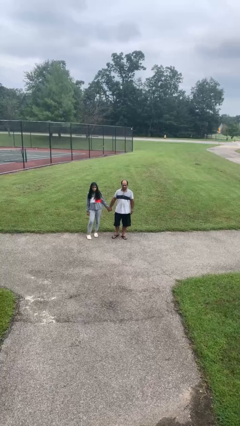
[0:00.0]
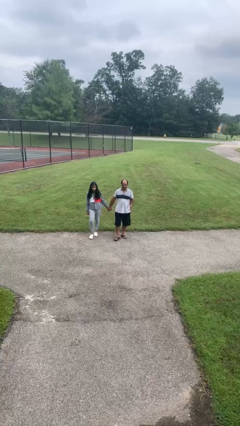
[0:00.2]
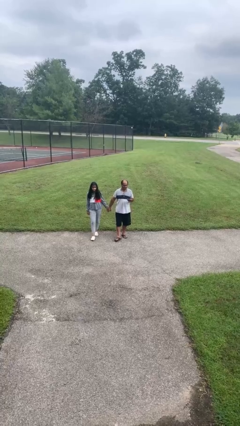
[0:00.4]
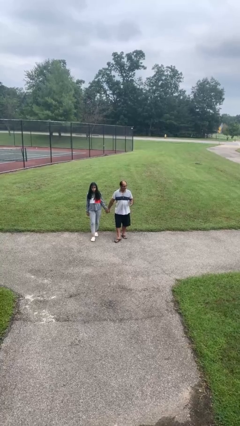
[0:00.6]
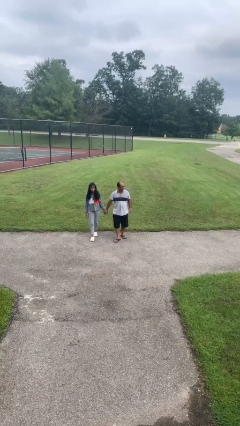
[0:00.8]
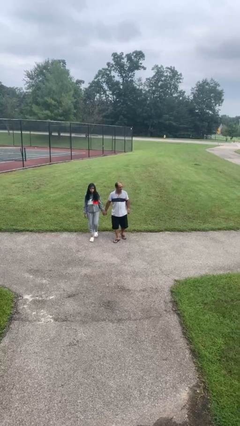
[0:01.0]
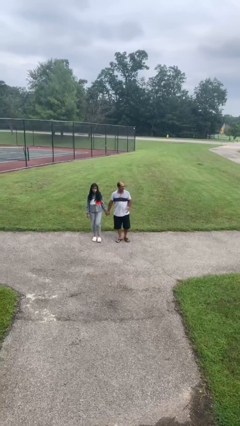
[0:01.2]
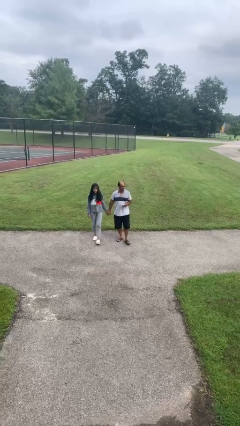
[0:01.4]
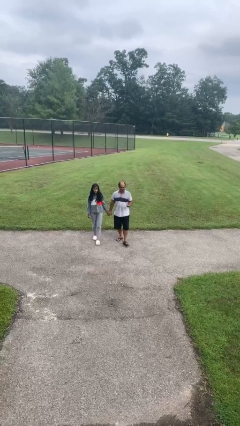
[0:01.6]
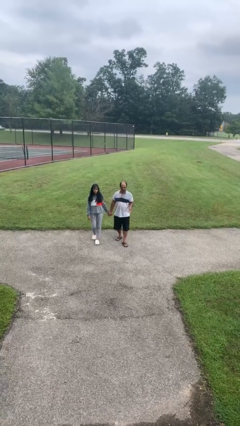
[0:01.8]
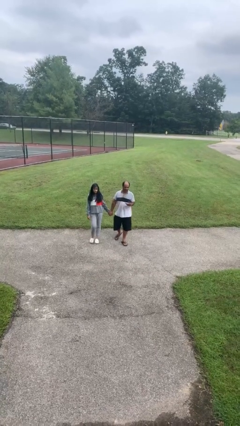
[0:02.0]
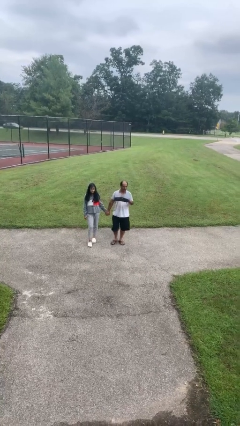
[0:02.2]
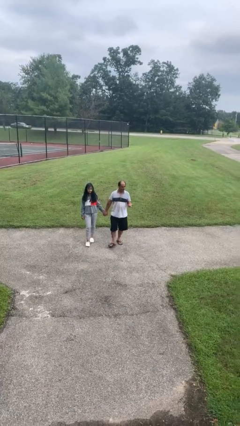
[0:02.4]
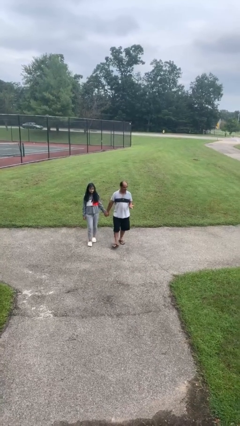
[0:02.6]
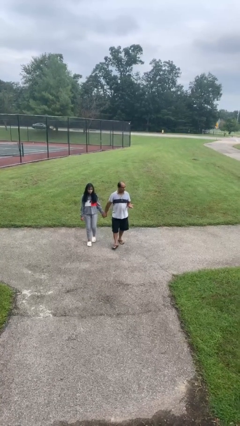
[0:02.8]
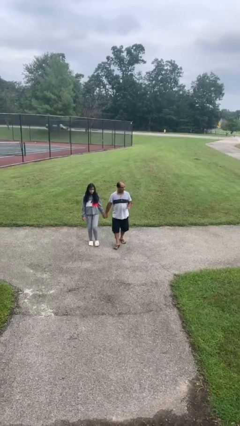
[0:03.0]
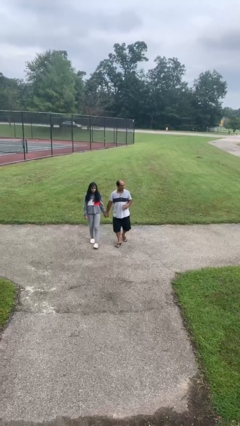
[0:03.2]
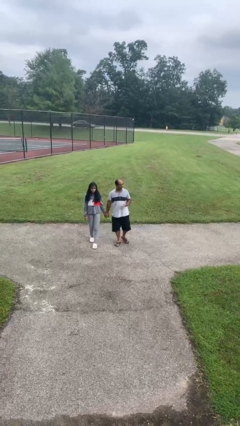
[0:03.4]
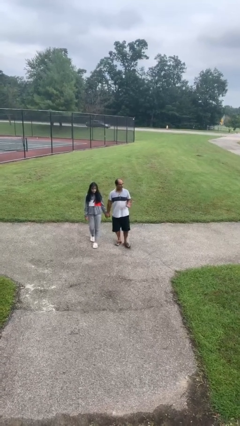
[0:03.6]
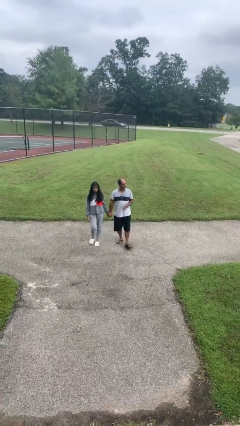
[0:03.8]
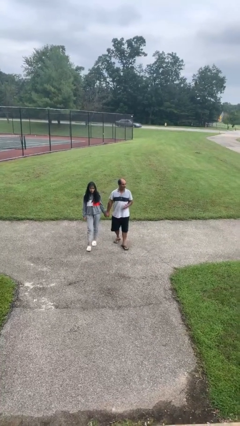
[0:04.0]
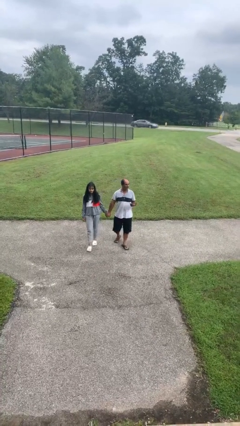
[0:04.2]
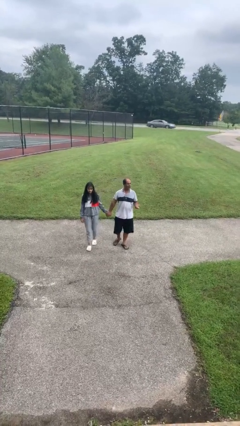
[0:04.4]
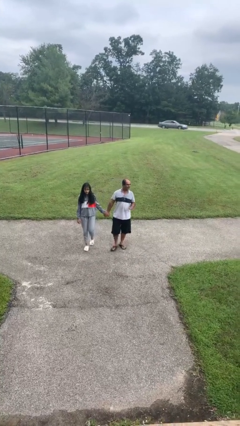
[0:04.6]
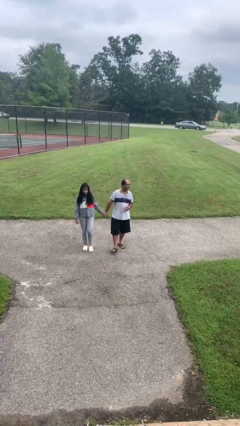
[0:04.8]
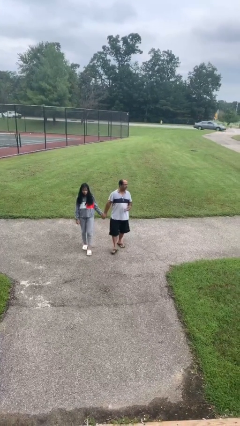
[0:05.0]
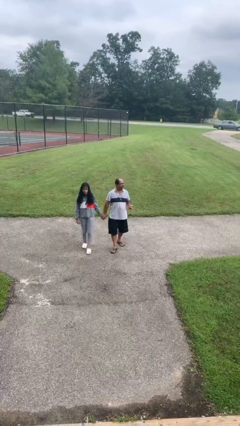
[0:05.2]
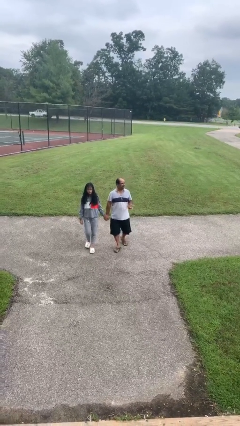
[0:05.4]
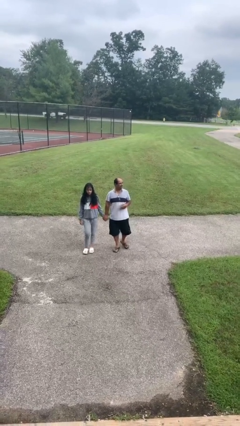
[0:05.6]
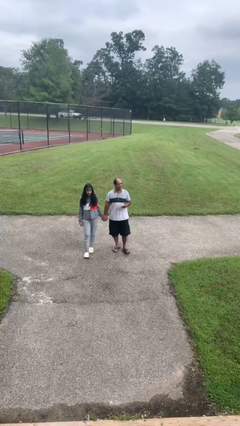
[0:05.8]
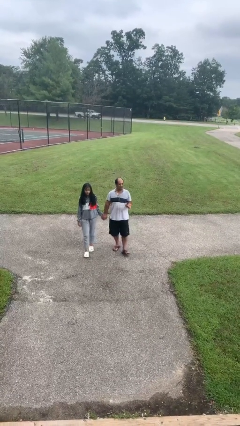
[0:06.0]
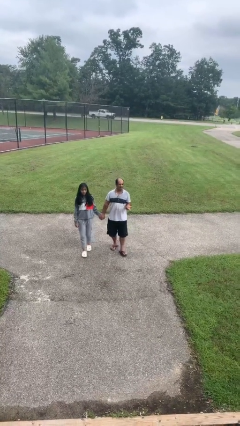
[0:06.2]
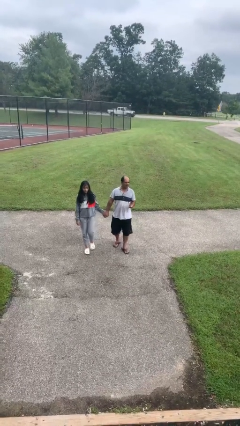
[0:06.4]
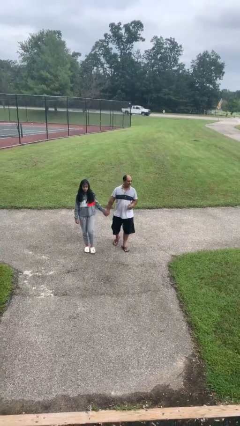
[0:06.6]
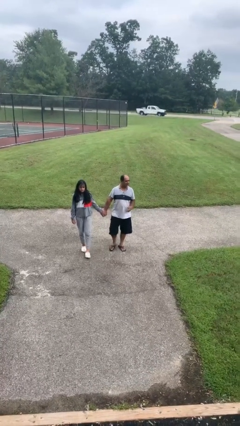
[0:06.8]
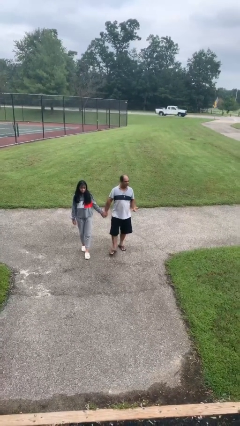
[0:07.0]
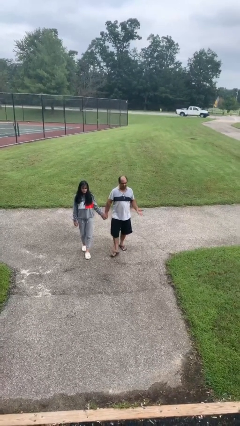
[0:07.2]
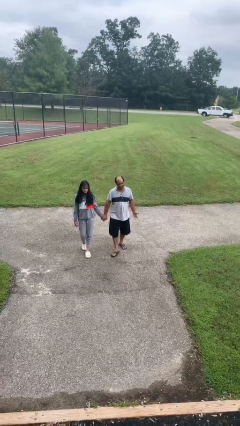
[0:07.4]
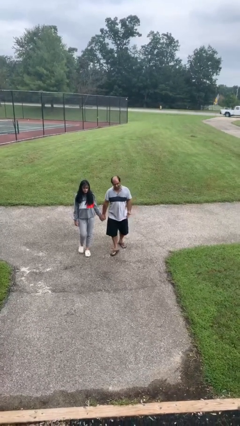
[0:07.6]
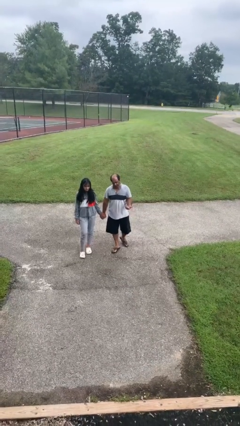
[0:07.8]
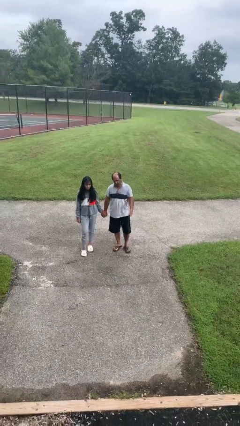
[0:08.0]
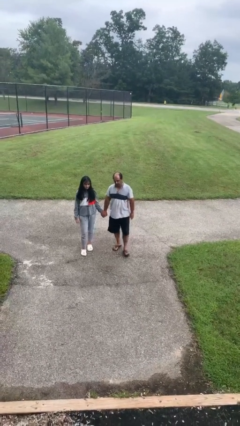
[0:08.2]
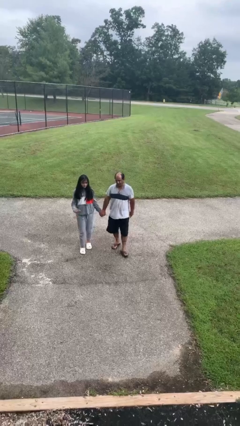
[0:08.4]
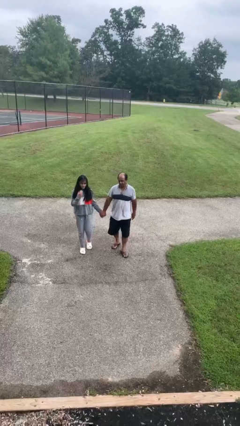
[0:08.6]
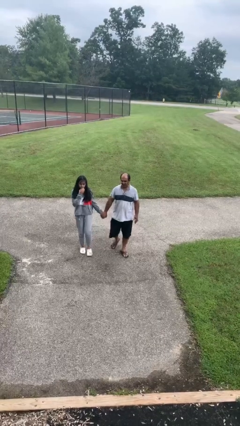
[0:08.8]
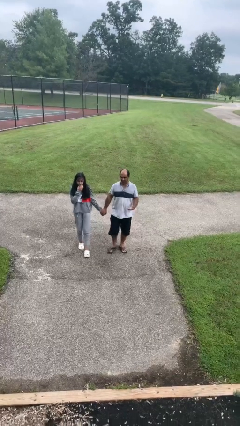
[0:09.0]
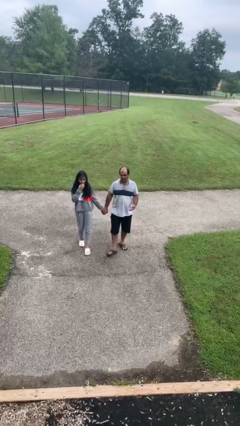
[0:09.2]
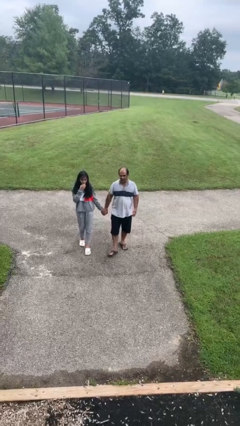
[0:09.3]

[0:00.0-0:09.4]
person holds hand

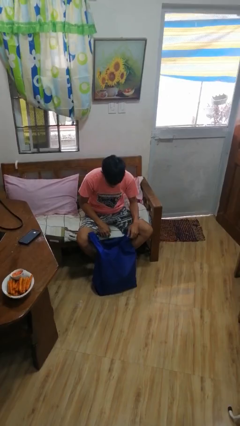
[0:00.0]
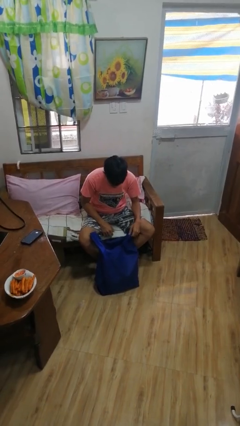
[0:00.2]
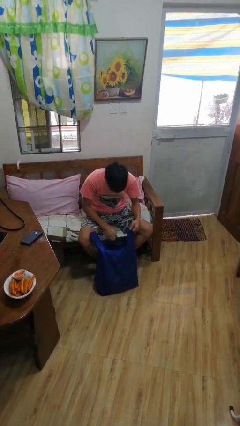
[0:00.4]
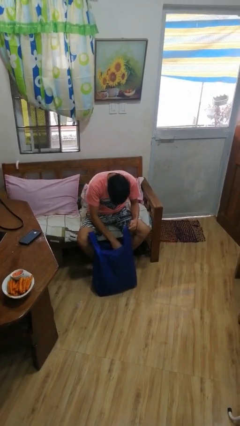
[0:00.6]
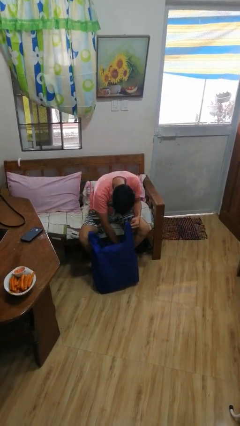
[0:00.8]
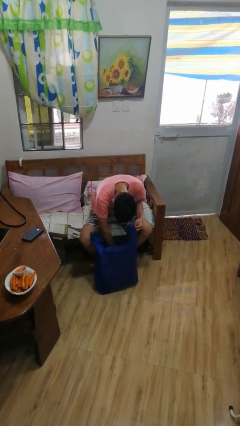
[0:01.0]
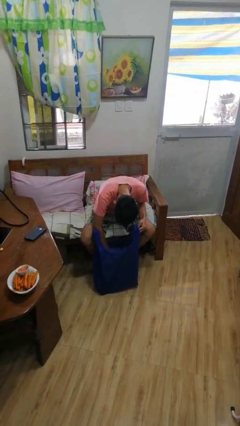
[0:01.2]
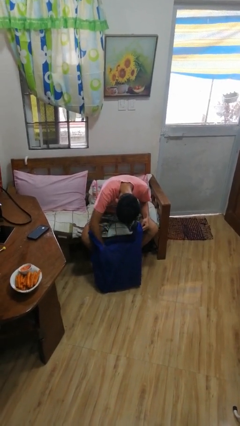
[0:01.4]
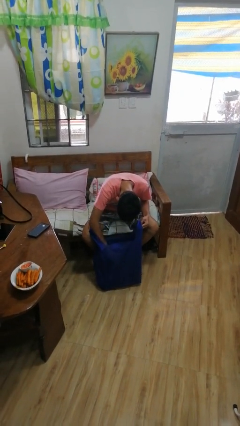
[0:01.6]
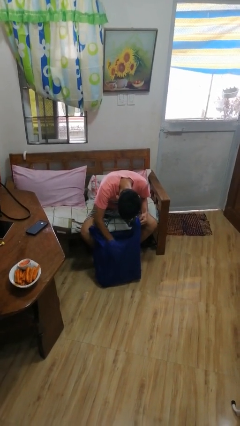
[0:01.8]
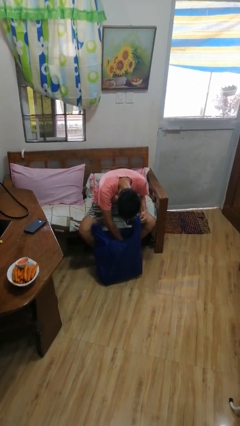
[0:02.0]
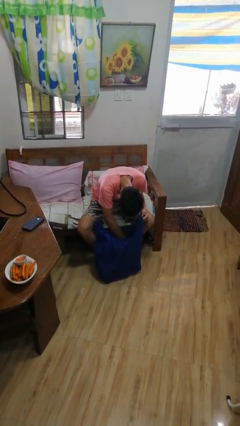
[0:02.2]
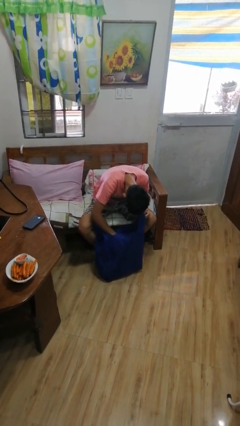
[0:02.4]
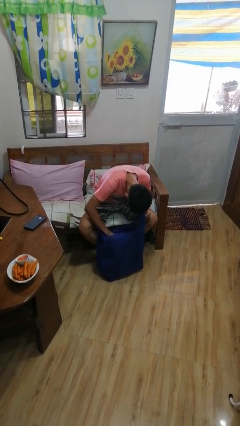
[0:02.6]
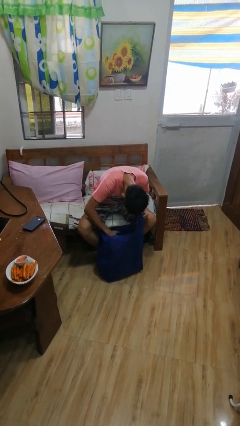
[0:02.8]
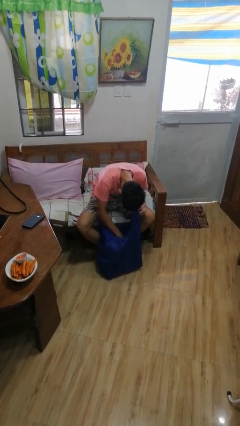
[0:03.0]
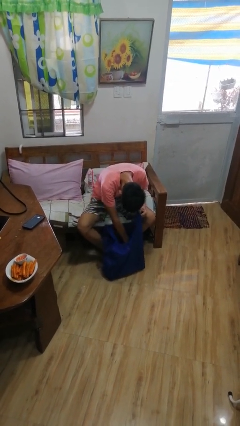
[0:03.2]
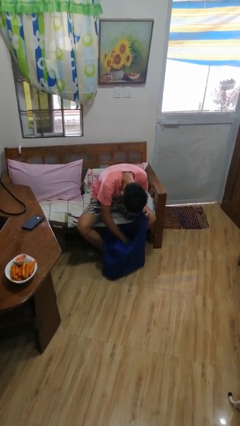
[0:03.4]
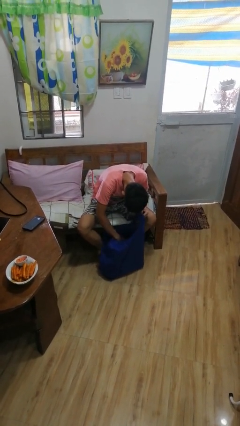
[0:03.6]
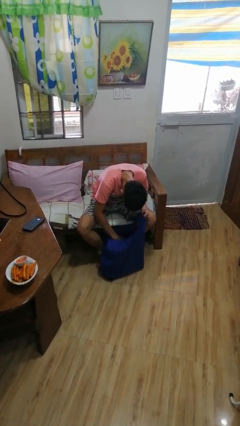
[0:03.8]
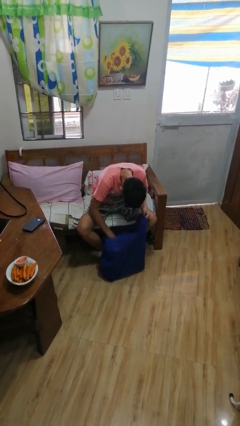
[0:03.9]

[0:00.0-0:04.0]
person searches in bag

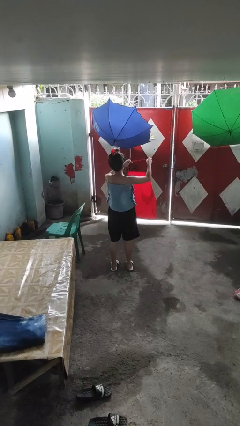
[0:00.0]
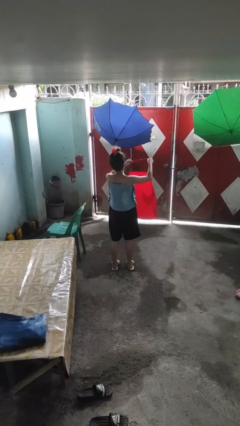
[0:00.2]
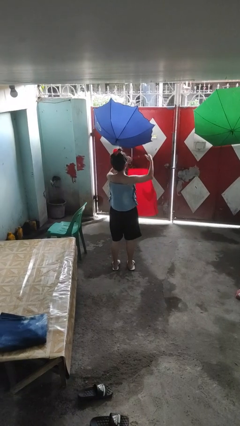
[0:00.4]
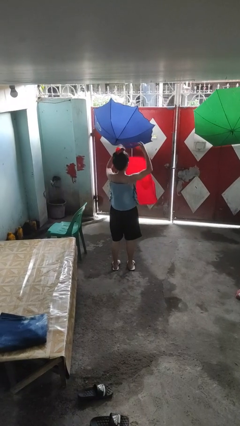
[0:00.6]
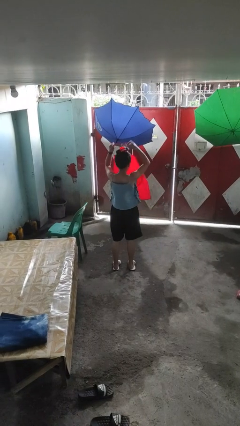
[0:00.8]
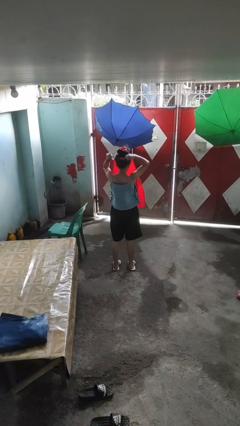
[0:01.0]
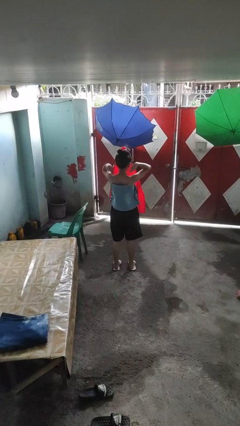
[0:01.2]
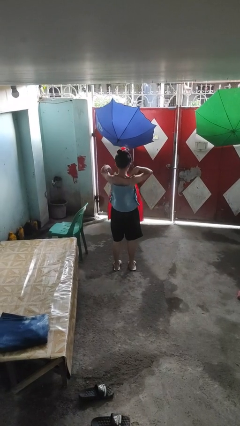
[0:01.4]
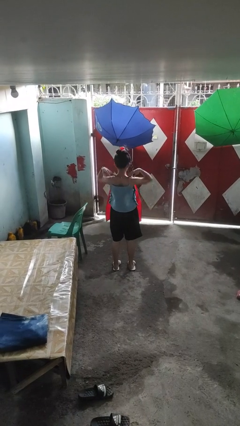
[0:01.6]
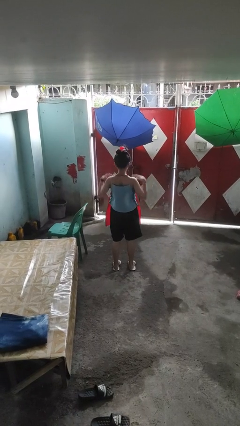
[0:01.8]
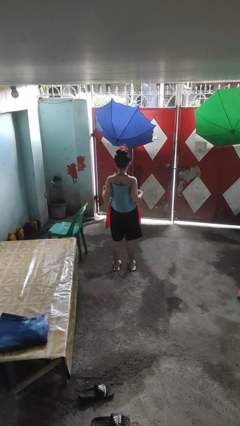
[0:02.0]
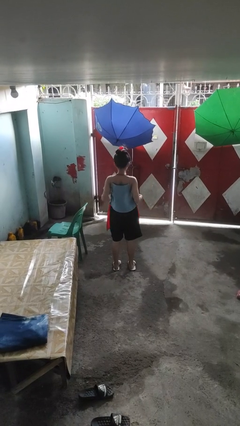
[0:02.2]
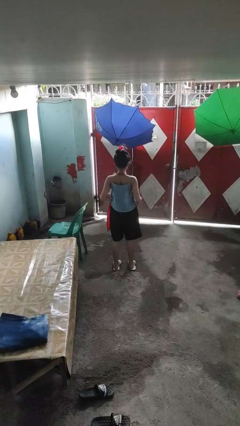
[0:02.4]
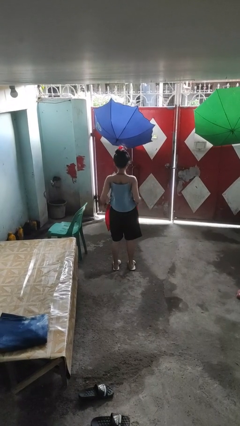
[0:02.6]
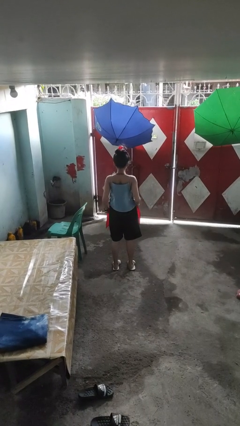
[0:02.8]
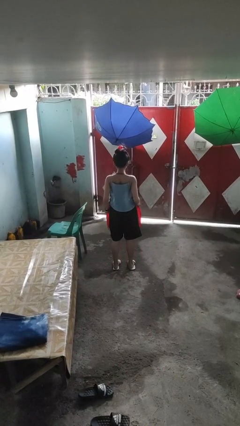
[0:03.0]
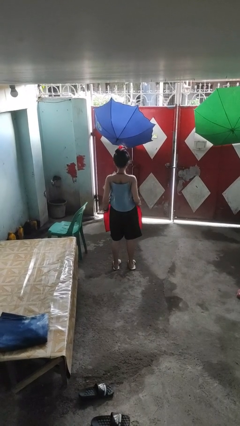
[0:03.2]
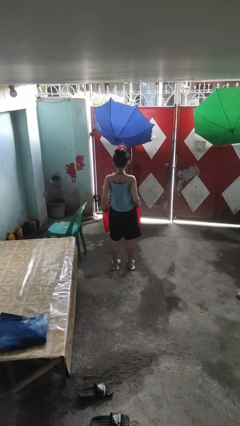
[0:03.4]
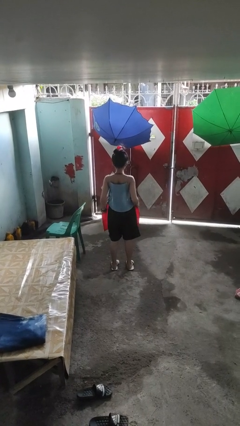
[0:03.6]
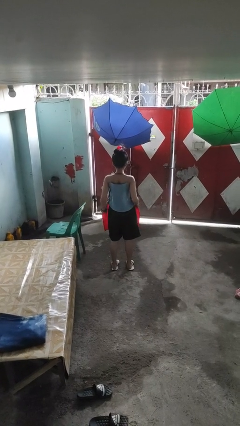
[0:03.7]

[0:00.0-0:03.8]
person puts on apron

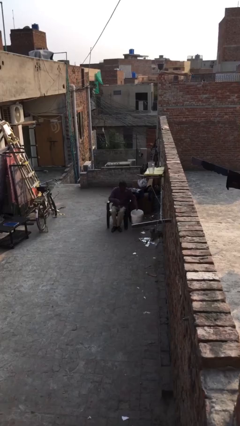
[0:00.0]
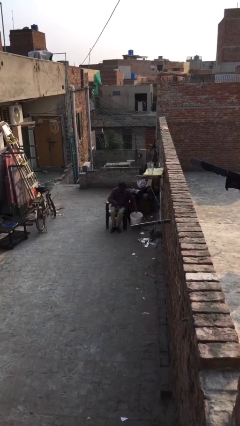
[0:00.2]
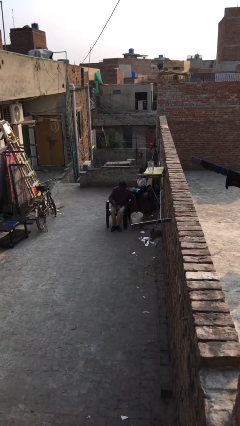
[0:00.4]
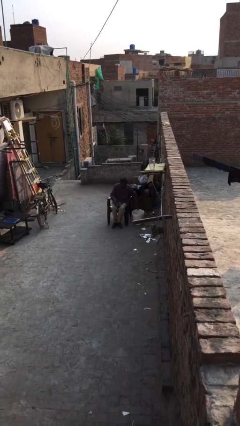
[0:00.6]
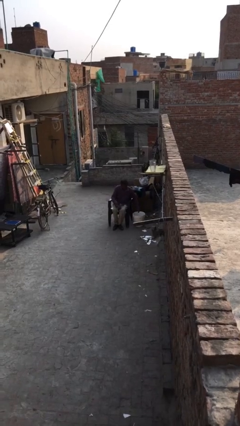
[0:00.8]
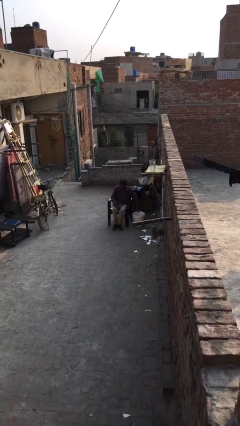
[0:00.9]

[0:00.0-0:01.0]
person puts down object on floor
